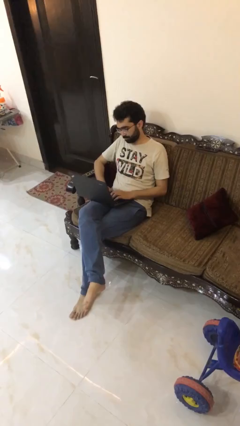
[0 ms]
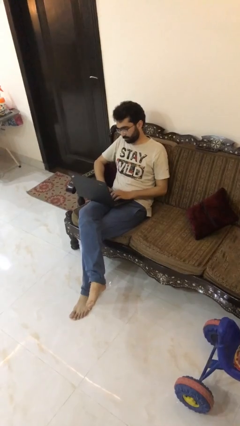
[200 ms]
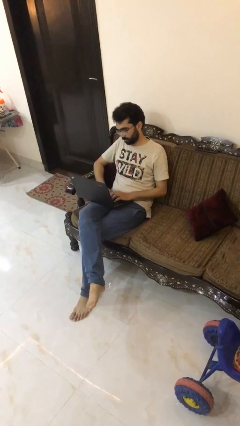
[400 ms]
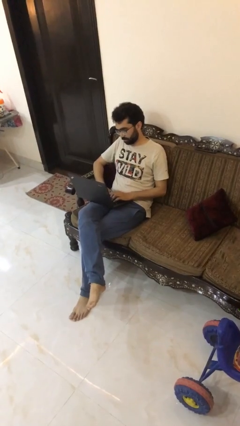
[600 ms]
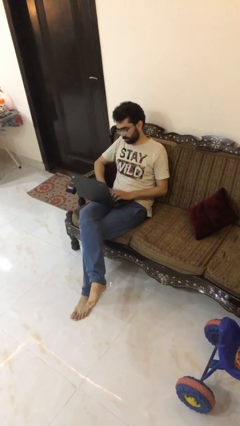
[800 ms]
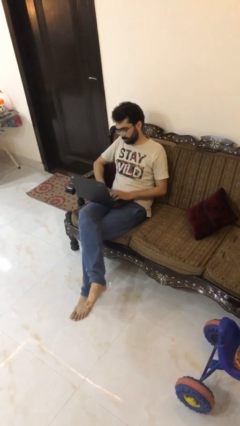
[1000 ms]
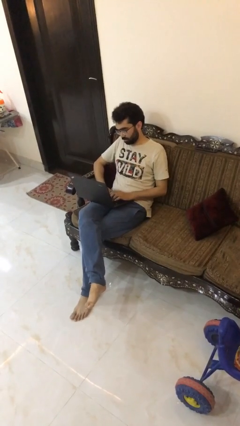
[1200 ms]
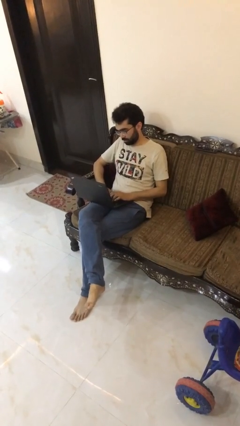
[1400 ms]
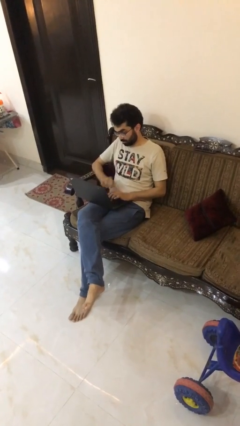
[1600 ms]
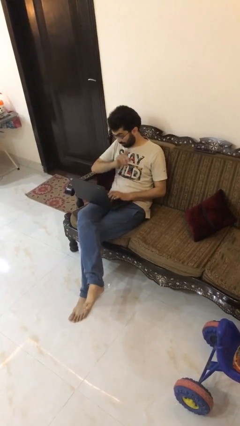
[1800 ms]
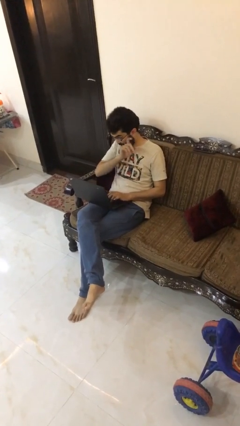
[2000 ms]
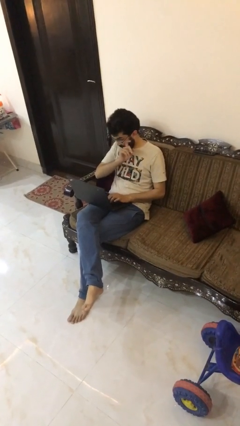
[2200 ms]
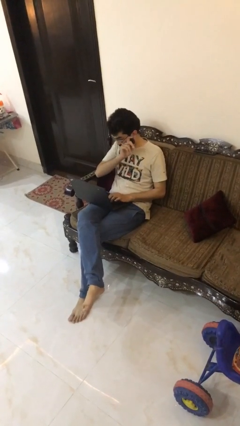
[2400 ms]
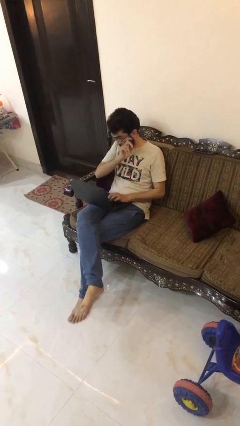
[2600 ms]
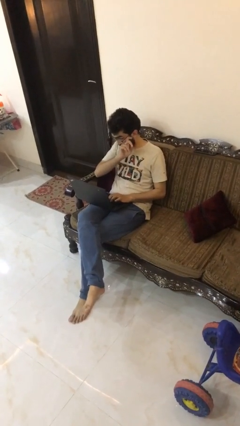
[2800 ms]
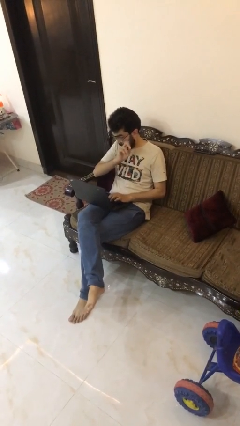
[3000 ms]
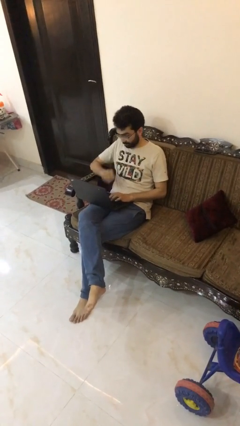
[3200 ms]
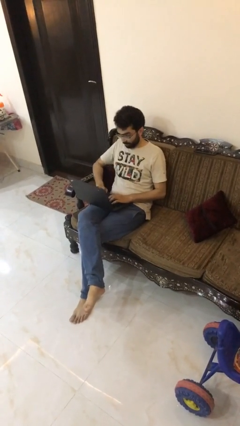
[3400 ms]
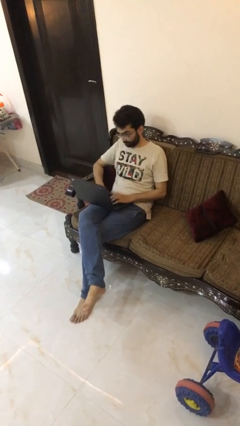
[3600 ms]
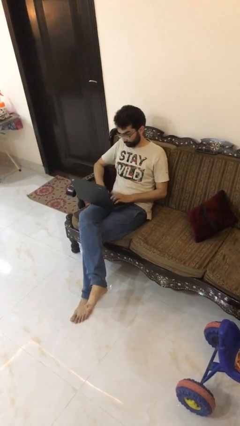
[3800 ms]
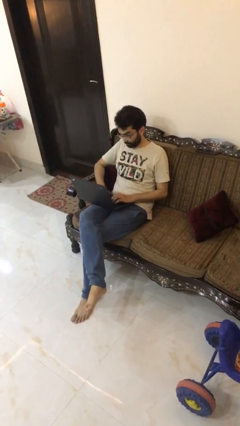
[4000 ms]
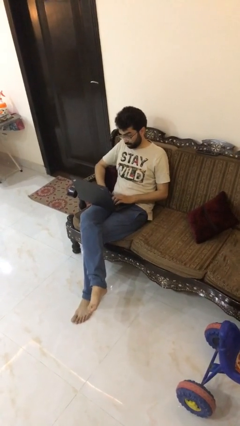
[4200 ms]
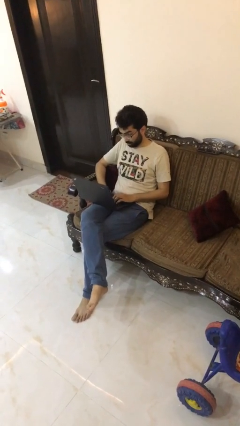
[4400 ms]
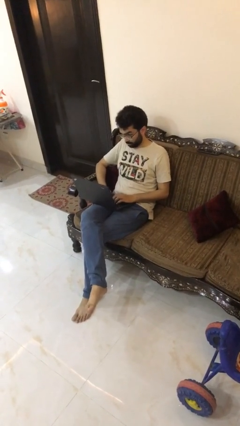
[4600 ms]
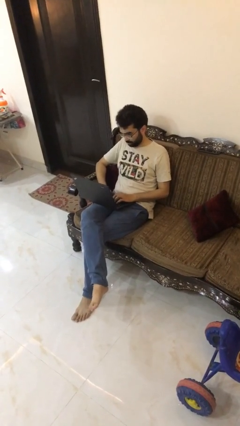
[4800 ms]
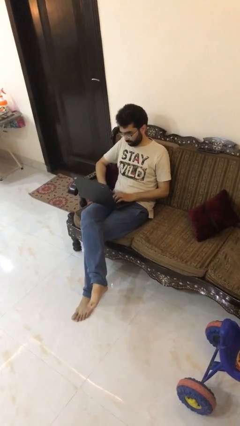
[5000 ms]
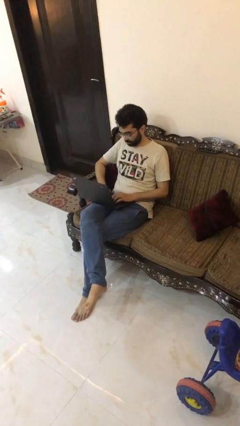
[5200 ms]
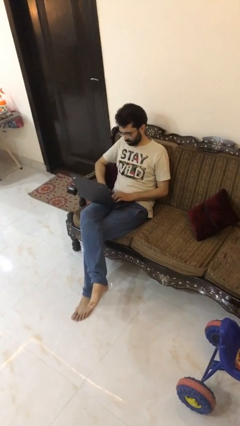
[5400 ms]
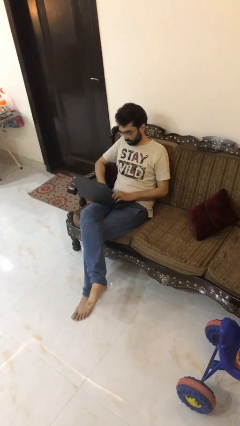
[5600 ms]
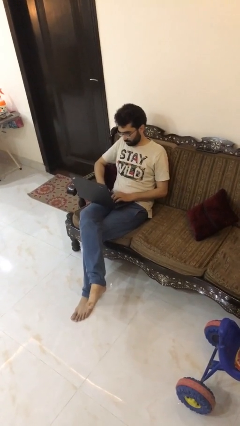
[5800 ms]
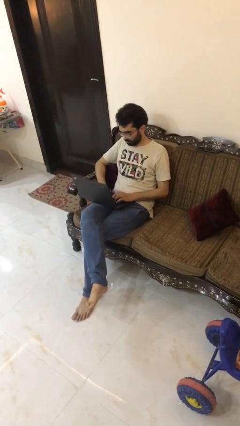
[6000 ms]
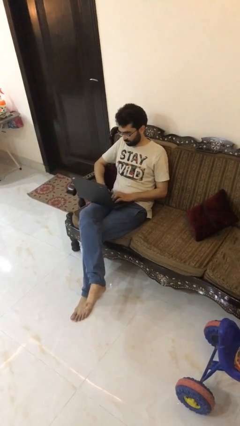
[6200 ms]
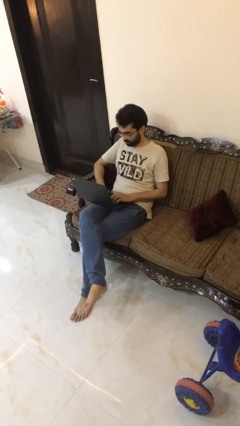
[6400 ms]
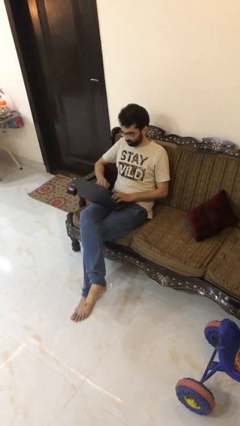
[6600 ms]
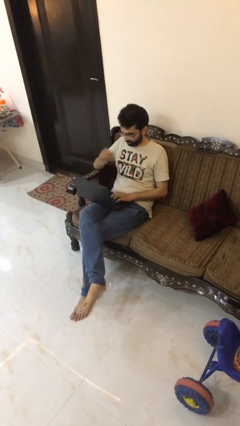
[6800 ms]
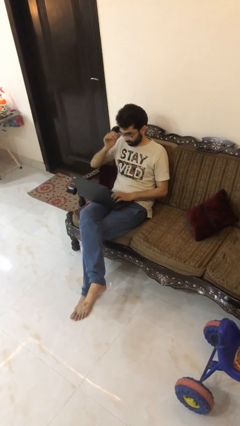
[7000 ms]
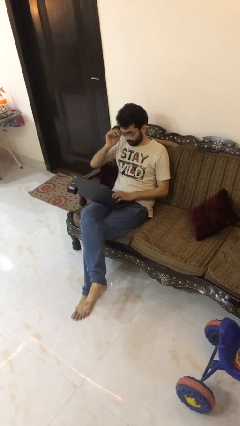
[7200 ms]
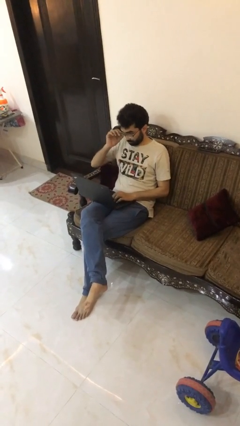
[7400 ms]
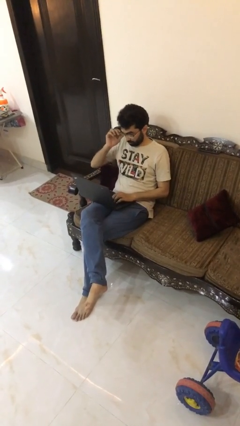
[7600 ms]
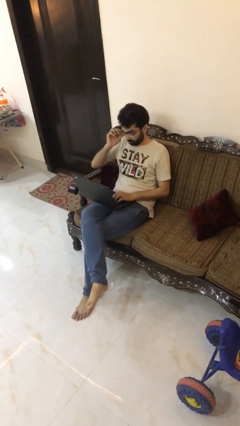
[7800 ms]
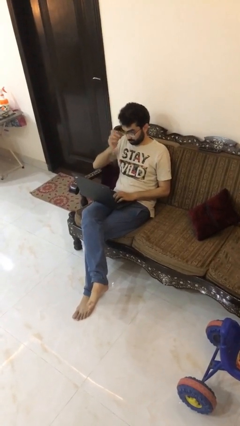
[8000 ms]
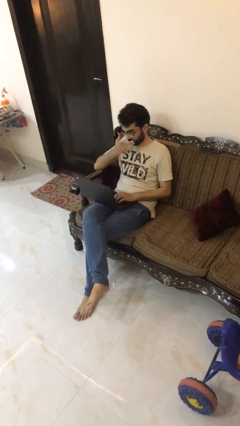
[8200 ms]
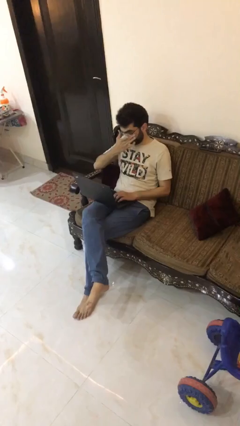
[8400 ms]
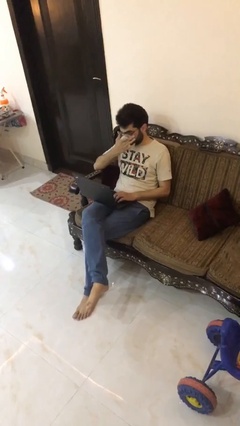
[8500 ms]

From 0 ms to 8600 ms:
person interacts with laptop

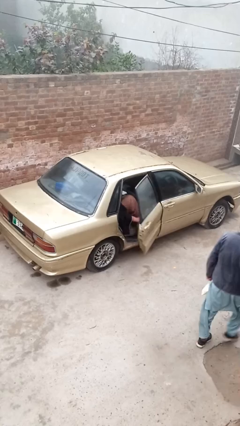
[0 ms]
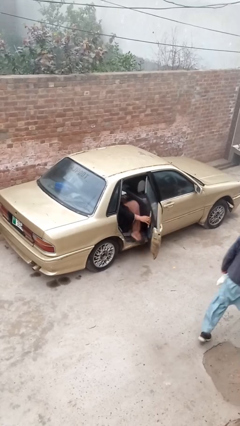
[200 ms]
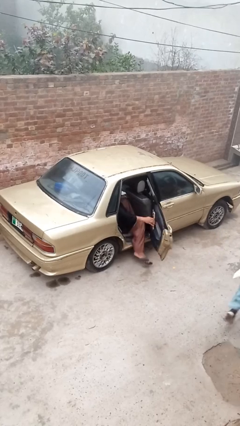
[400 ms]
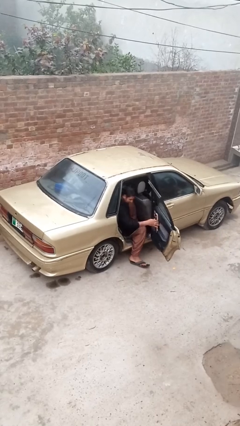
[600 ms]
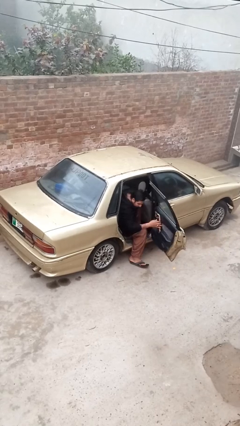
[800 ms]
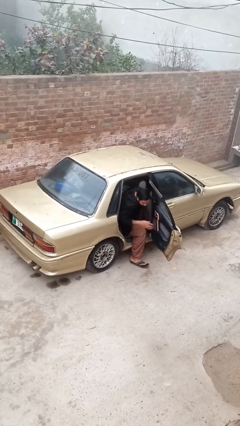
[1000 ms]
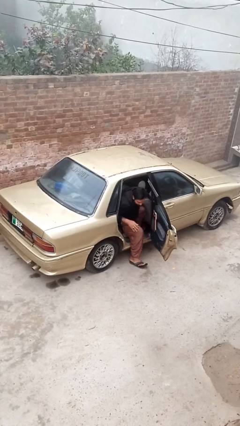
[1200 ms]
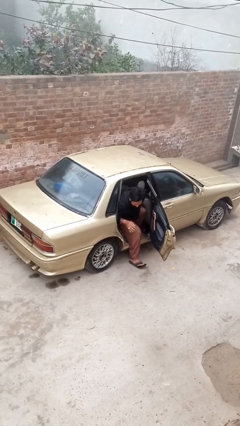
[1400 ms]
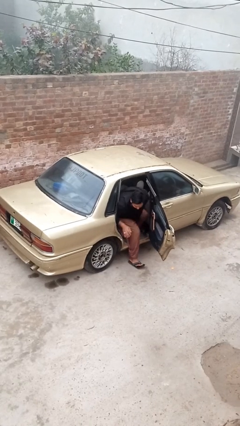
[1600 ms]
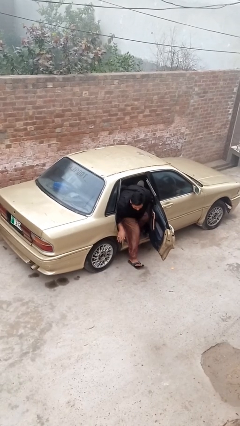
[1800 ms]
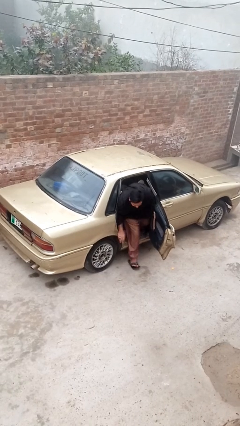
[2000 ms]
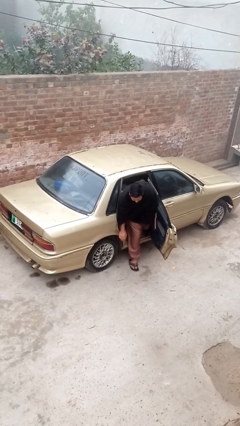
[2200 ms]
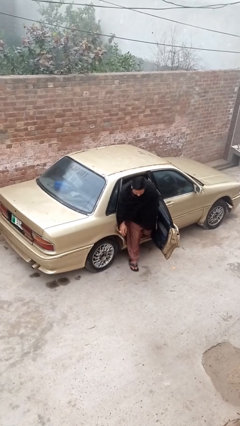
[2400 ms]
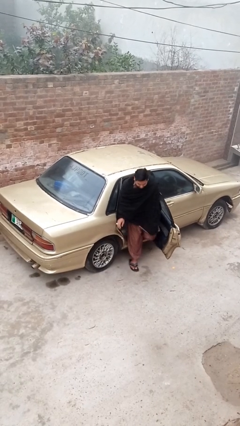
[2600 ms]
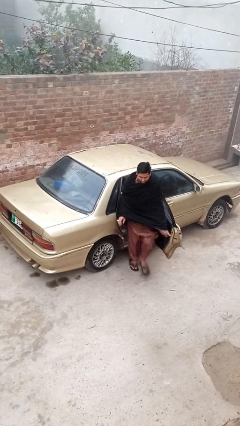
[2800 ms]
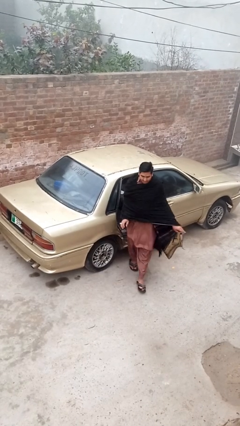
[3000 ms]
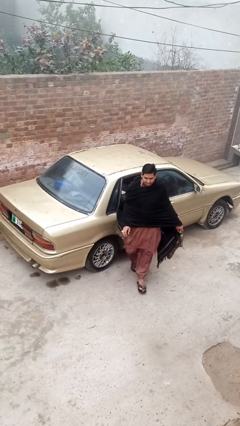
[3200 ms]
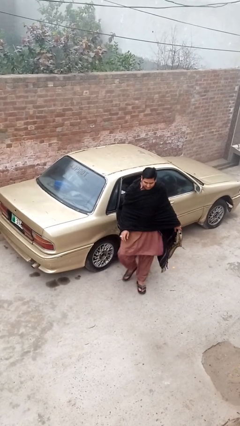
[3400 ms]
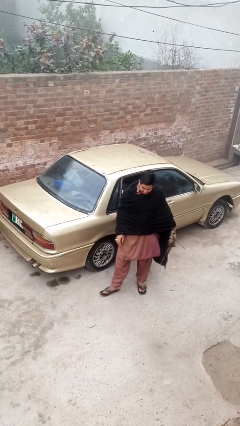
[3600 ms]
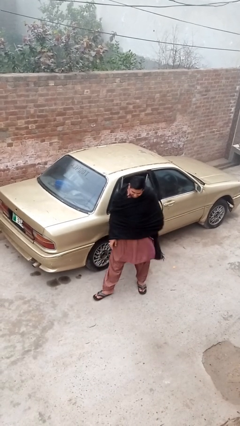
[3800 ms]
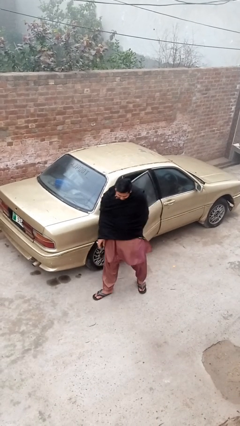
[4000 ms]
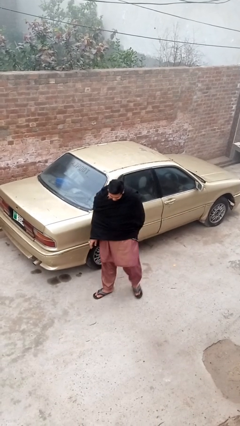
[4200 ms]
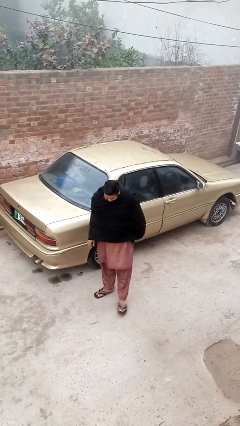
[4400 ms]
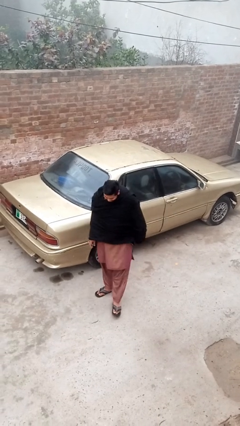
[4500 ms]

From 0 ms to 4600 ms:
car drops off person

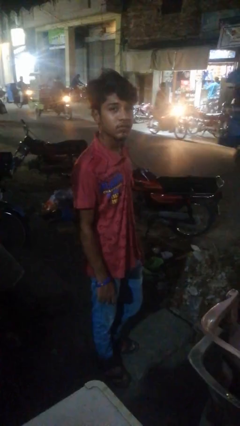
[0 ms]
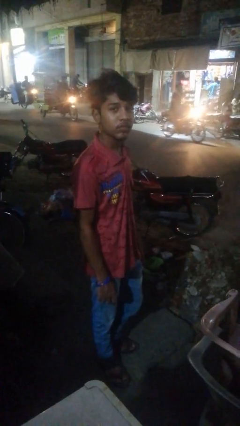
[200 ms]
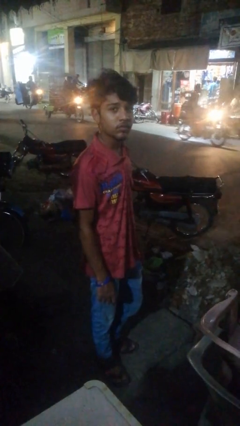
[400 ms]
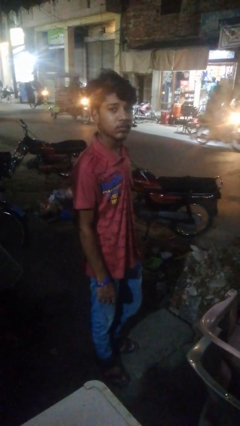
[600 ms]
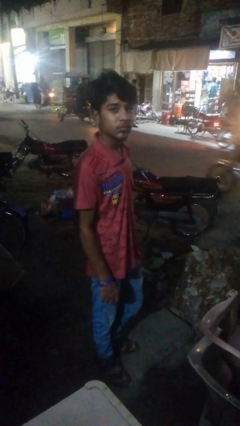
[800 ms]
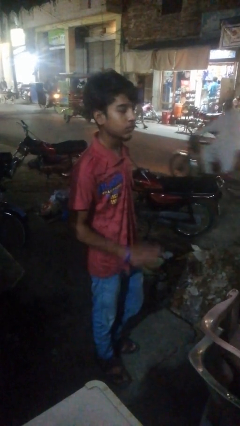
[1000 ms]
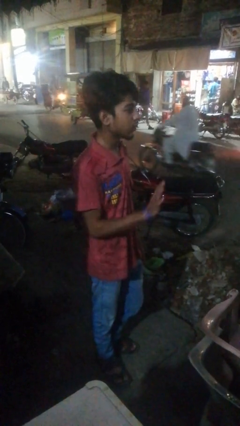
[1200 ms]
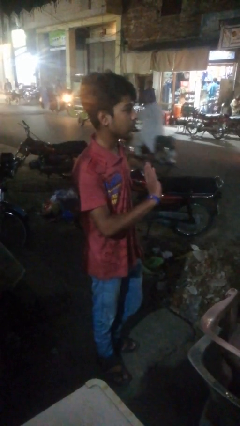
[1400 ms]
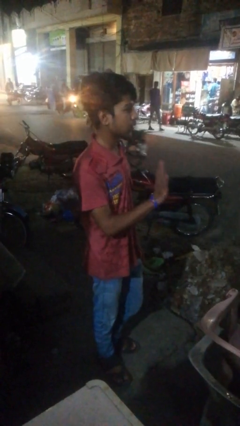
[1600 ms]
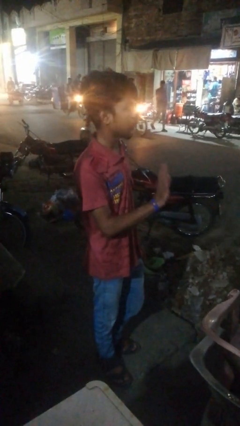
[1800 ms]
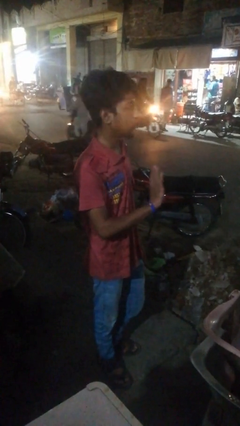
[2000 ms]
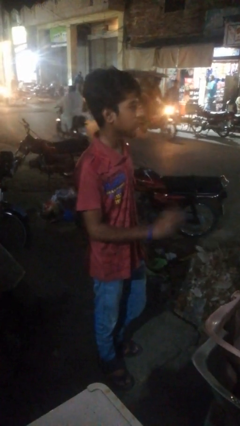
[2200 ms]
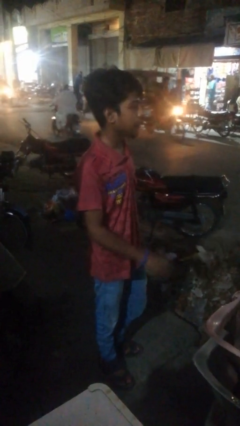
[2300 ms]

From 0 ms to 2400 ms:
person waves at person

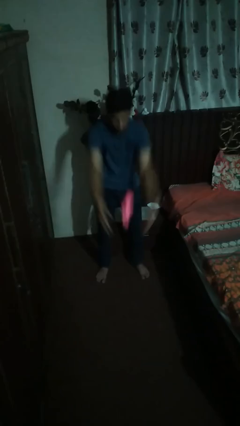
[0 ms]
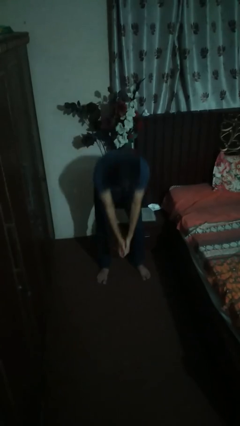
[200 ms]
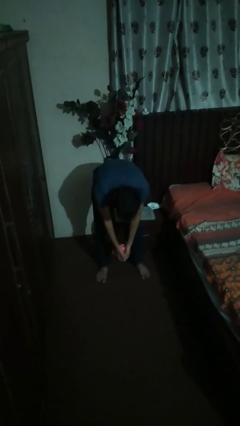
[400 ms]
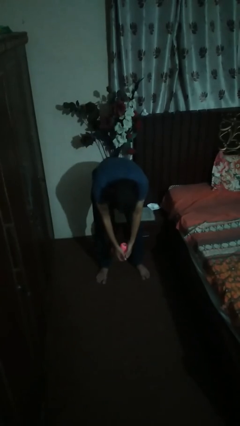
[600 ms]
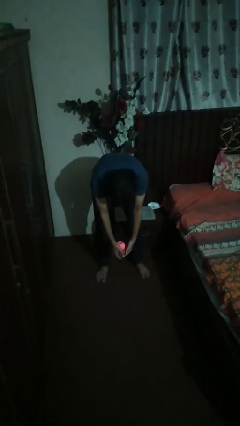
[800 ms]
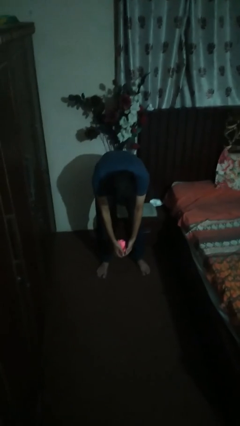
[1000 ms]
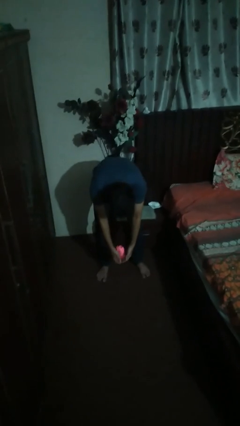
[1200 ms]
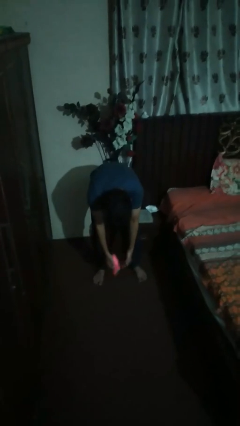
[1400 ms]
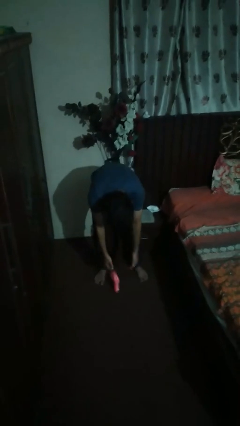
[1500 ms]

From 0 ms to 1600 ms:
person catches dropped object

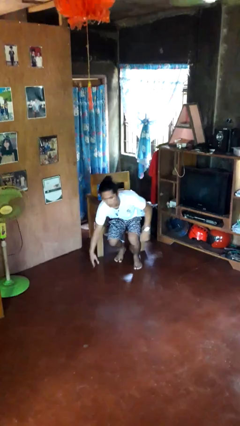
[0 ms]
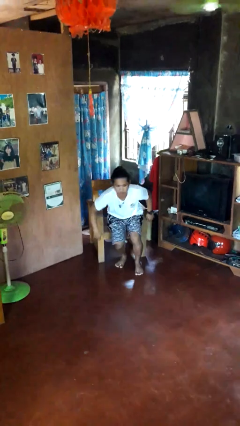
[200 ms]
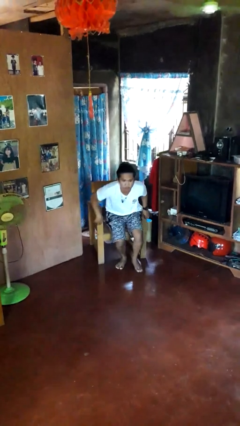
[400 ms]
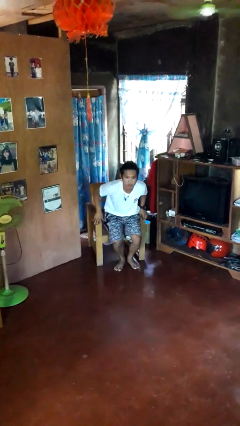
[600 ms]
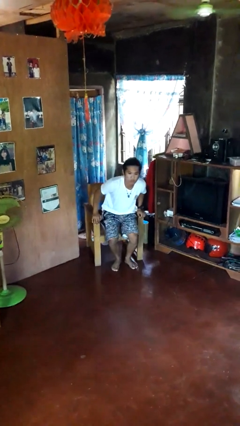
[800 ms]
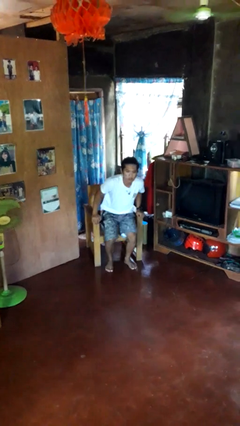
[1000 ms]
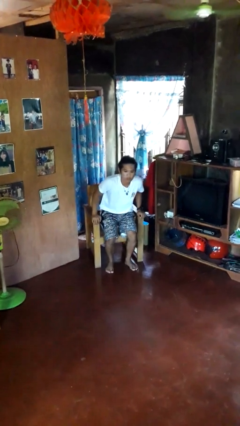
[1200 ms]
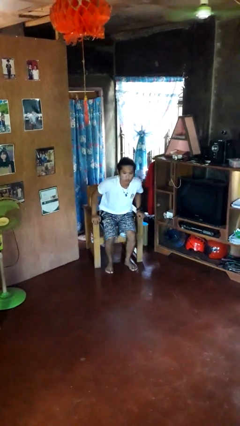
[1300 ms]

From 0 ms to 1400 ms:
person stands up from floor
